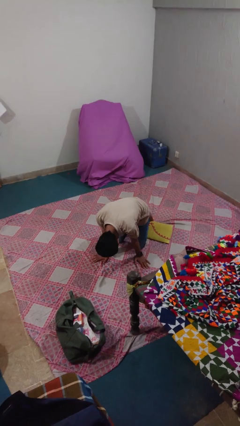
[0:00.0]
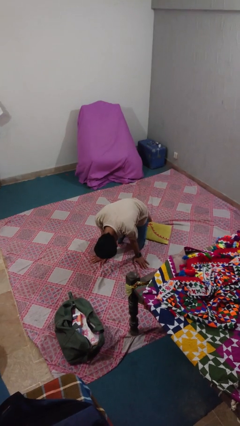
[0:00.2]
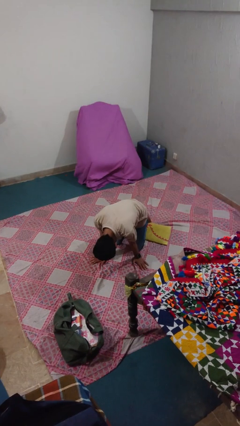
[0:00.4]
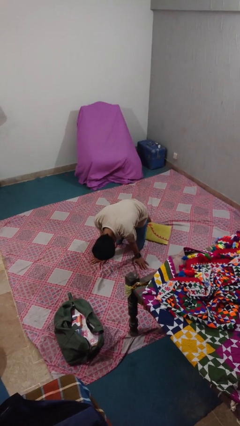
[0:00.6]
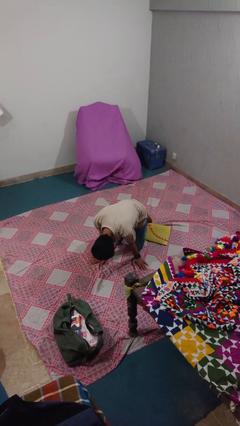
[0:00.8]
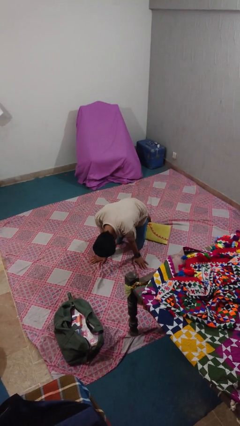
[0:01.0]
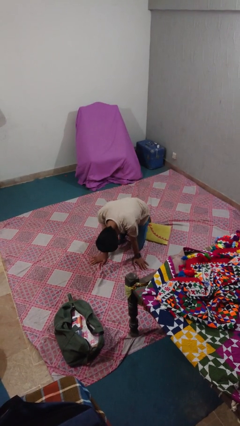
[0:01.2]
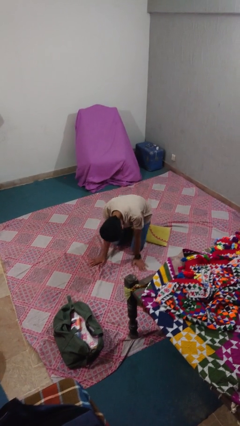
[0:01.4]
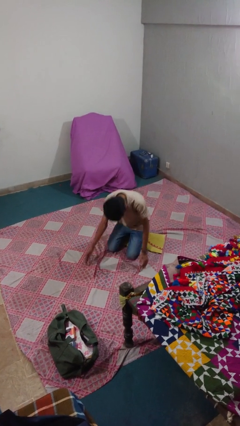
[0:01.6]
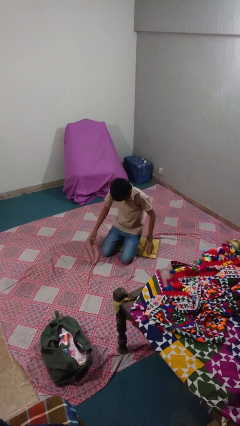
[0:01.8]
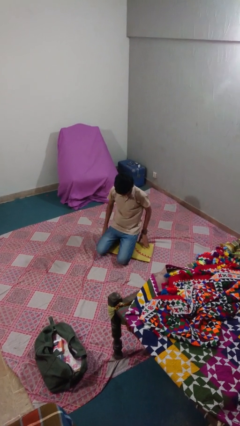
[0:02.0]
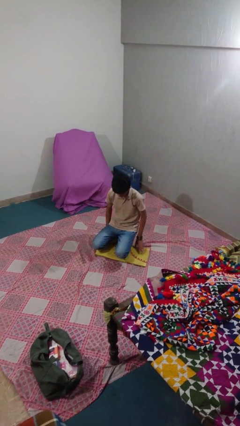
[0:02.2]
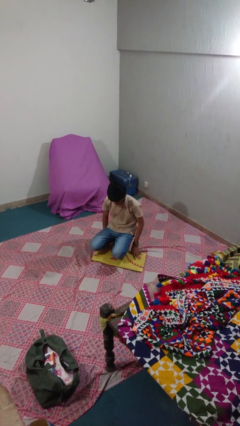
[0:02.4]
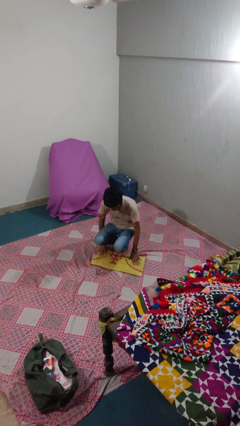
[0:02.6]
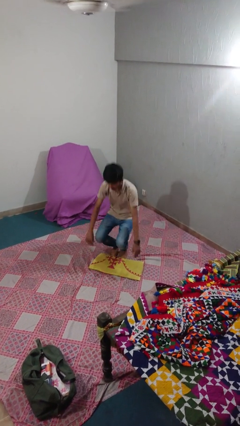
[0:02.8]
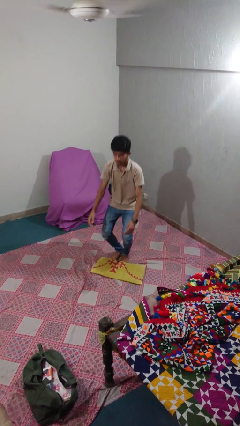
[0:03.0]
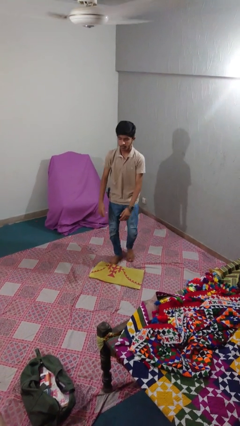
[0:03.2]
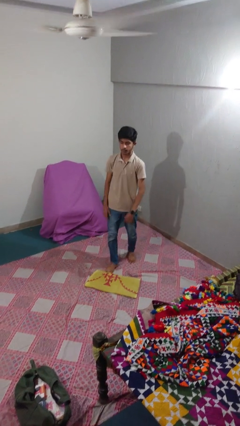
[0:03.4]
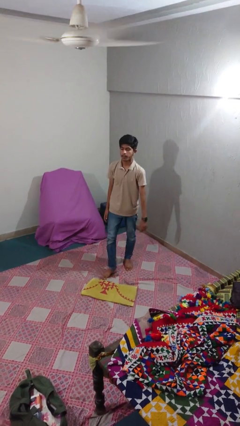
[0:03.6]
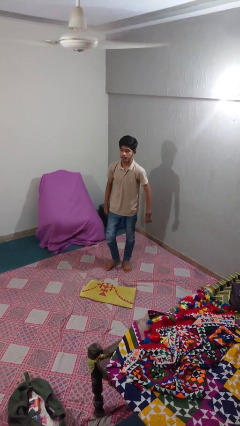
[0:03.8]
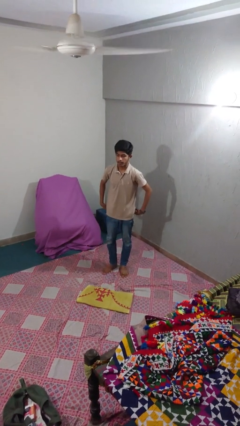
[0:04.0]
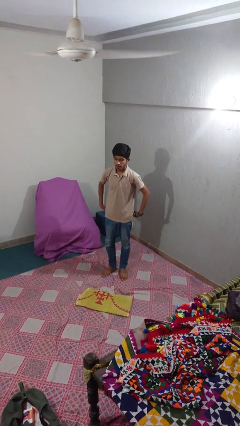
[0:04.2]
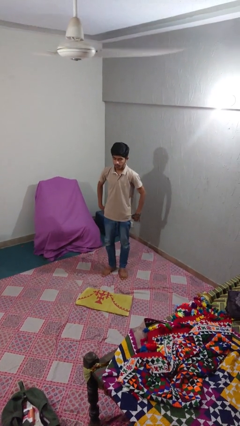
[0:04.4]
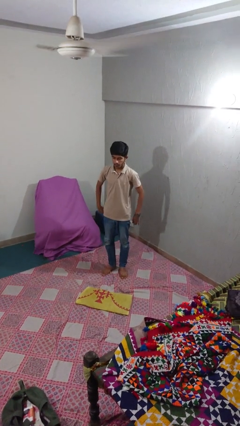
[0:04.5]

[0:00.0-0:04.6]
person stands up from floor

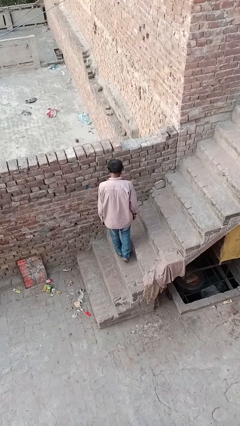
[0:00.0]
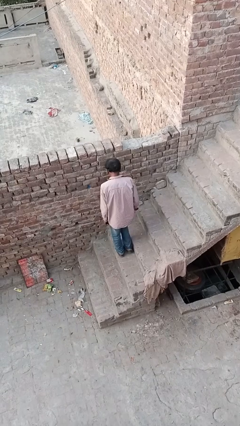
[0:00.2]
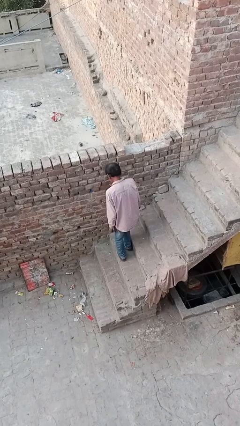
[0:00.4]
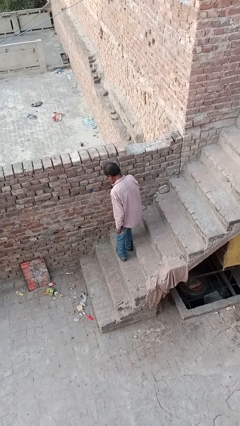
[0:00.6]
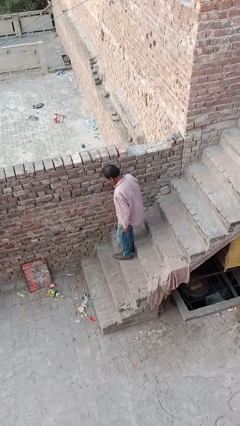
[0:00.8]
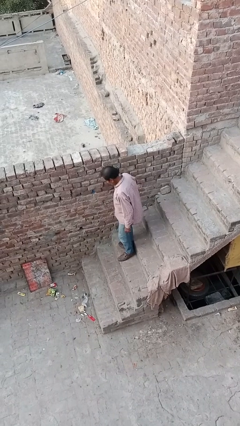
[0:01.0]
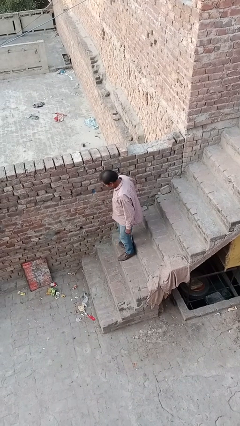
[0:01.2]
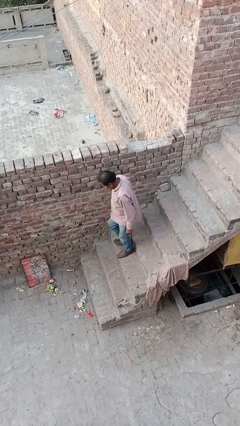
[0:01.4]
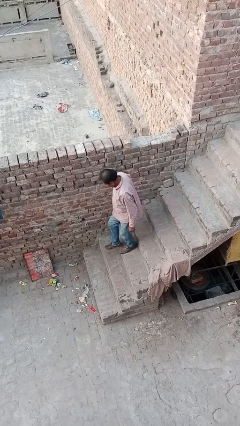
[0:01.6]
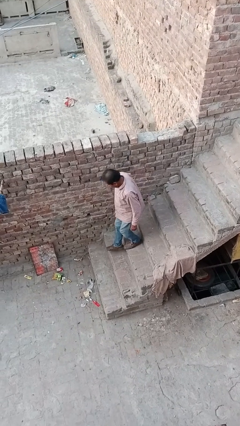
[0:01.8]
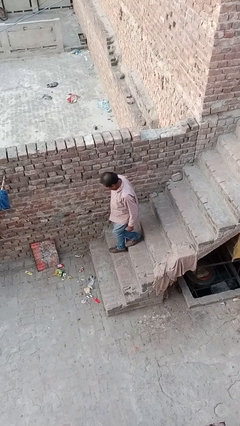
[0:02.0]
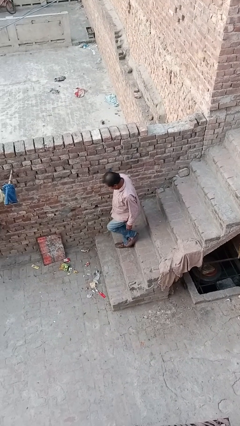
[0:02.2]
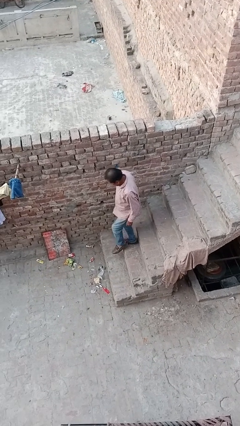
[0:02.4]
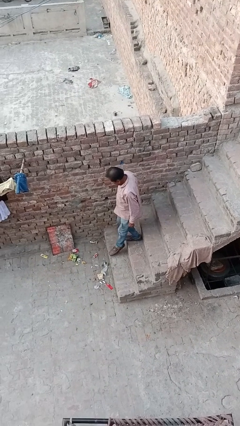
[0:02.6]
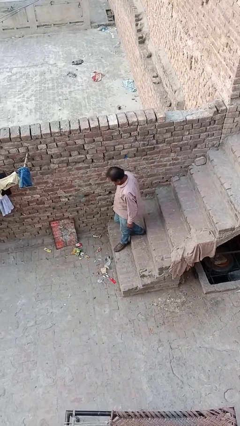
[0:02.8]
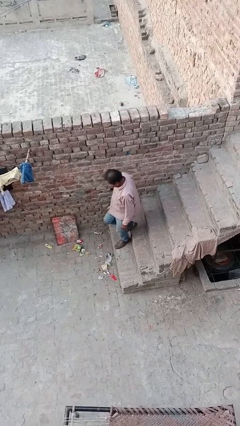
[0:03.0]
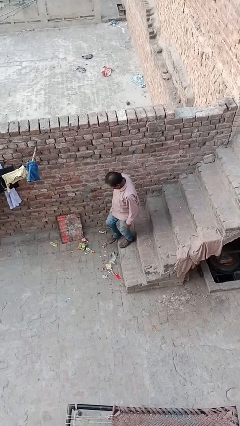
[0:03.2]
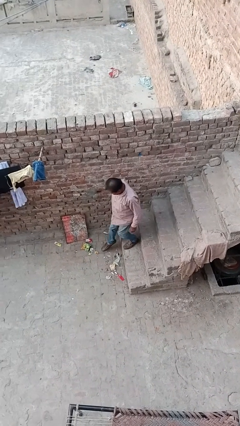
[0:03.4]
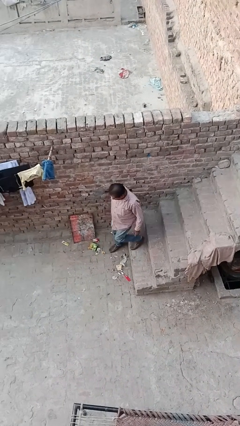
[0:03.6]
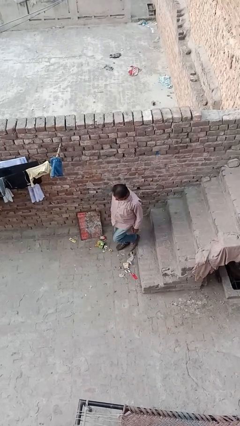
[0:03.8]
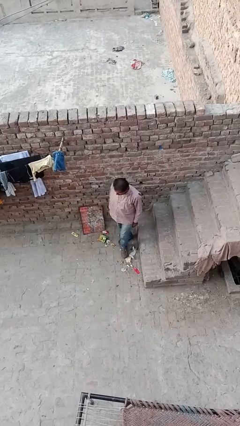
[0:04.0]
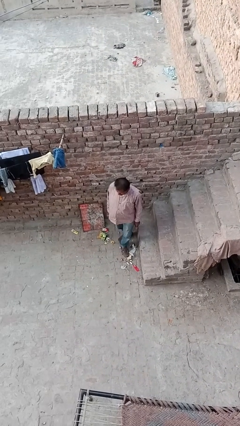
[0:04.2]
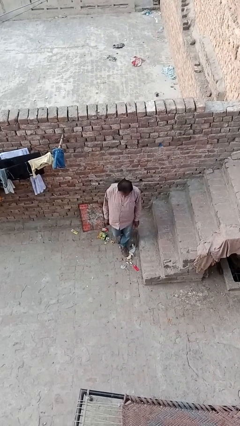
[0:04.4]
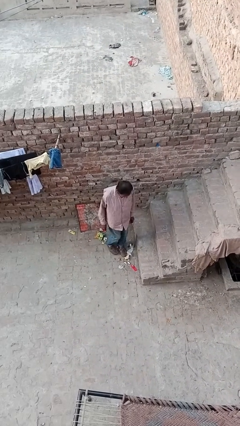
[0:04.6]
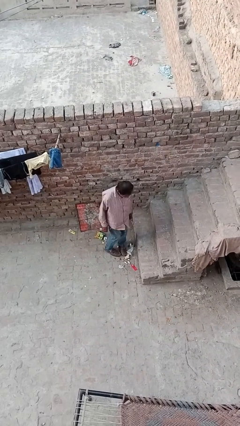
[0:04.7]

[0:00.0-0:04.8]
person climbs down stairs

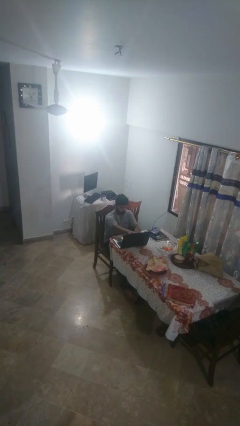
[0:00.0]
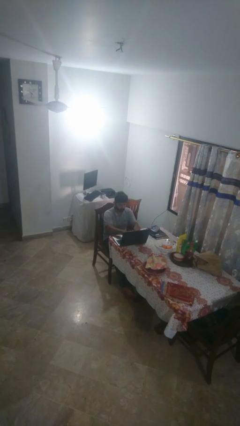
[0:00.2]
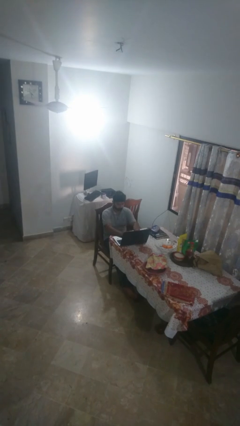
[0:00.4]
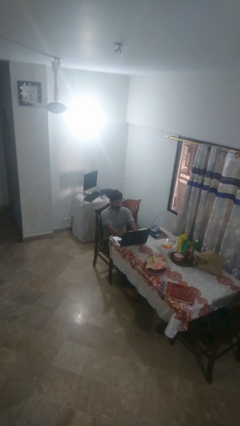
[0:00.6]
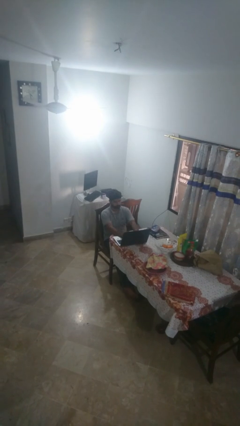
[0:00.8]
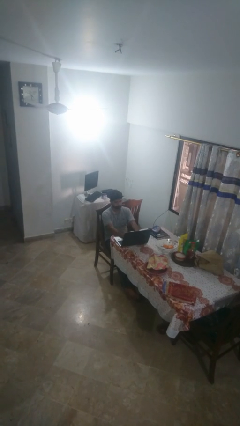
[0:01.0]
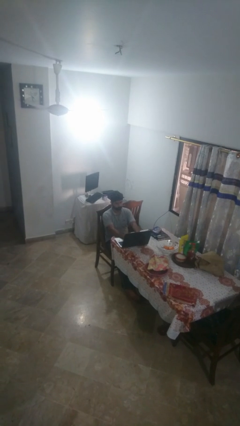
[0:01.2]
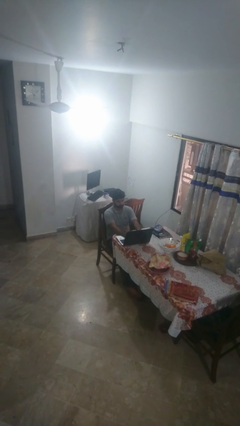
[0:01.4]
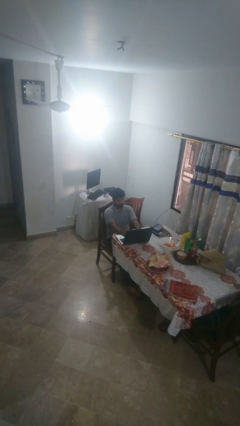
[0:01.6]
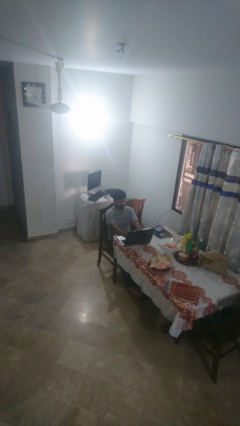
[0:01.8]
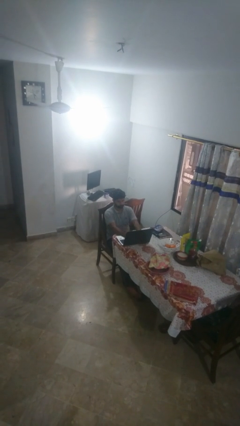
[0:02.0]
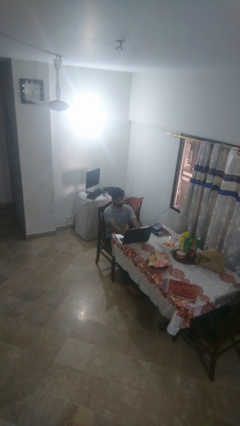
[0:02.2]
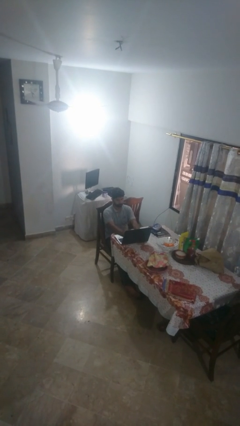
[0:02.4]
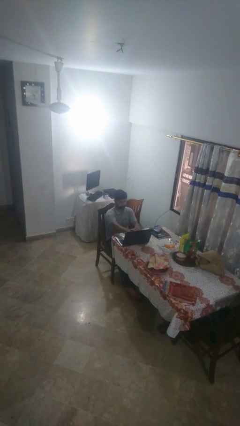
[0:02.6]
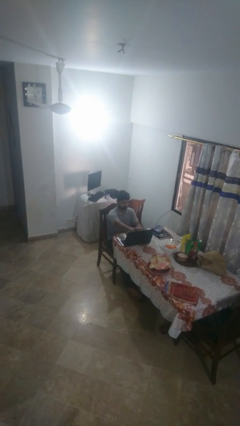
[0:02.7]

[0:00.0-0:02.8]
person interacts with laptop

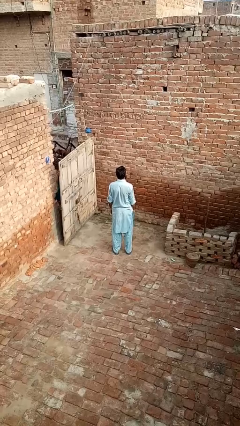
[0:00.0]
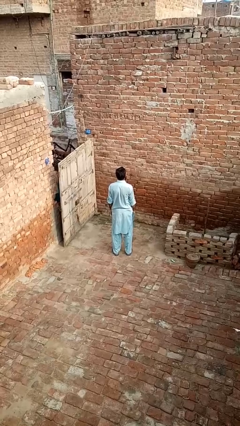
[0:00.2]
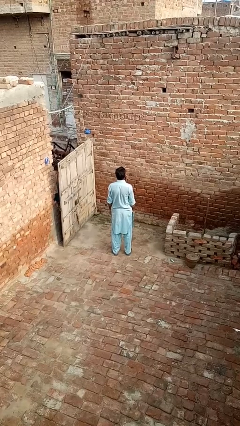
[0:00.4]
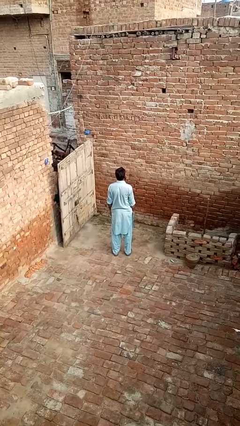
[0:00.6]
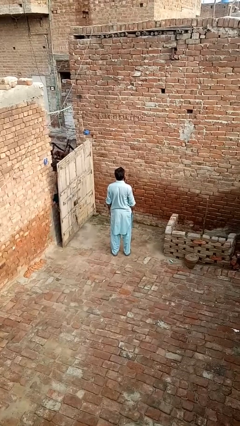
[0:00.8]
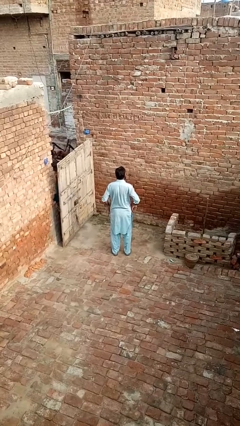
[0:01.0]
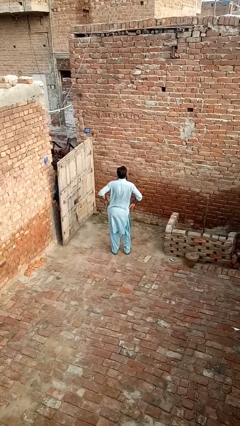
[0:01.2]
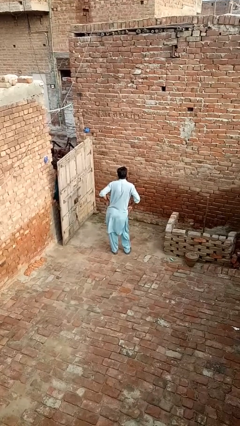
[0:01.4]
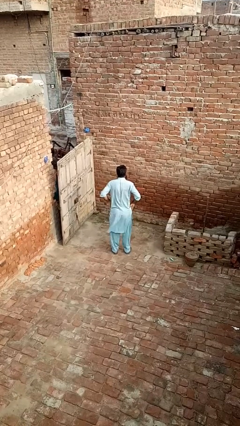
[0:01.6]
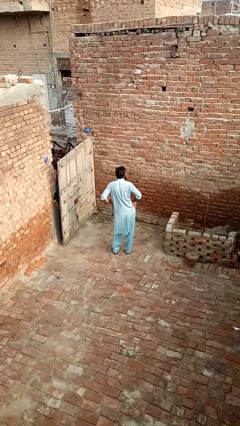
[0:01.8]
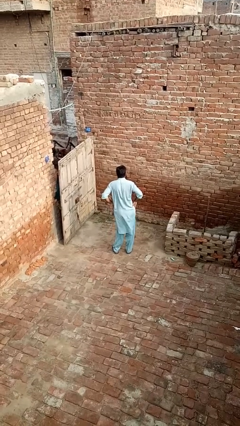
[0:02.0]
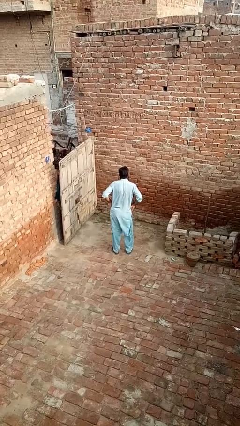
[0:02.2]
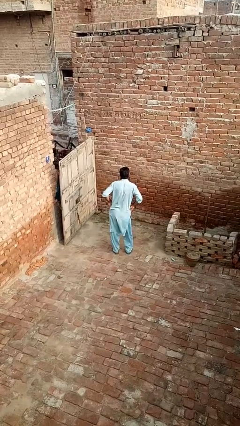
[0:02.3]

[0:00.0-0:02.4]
person wiggles hips

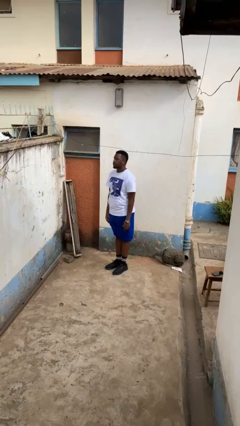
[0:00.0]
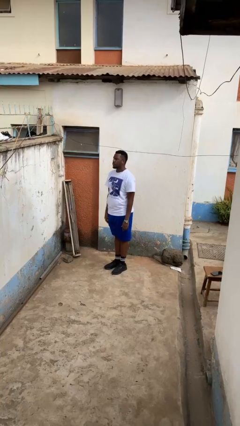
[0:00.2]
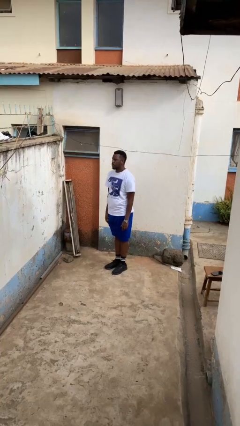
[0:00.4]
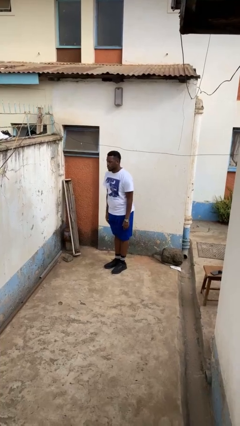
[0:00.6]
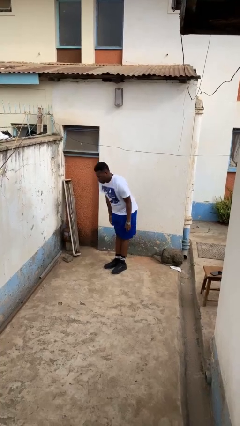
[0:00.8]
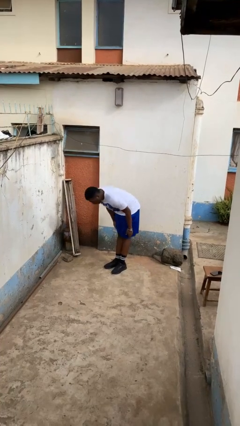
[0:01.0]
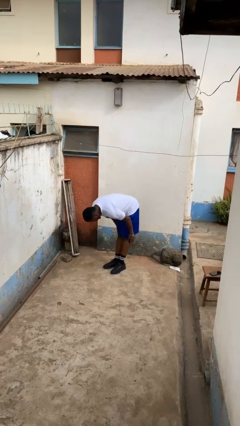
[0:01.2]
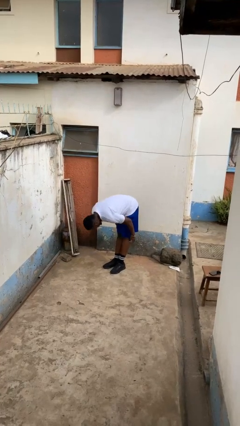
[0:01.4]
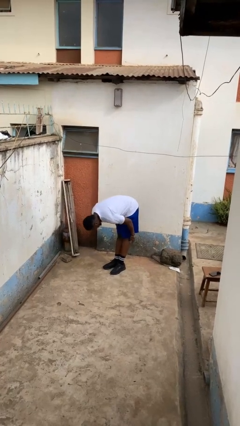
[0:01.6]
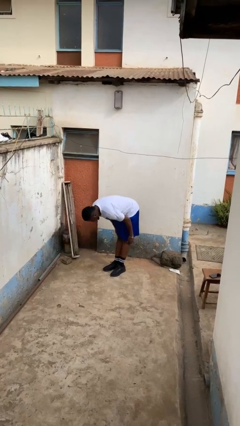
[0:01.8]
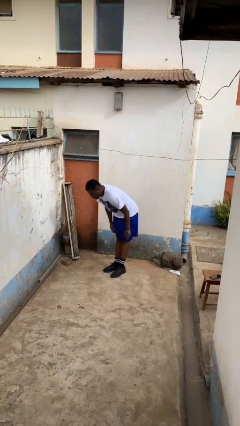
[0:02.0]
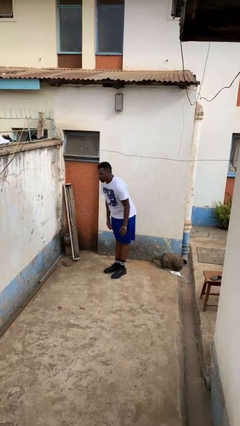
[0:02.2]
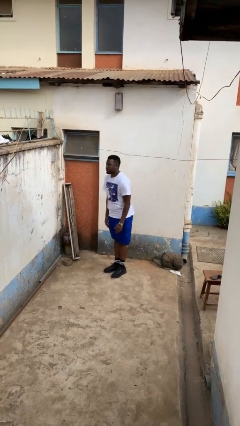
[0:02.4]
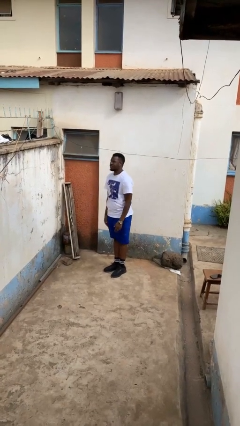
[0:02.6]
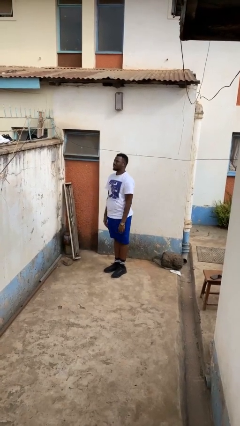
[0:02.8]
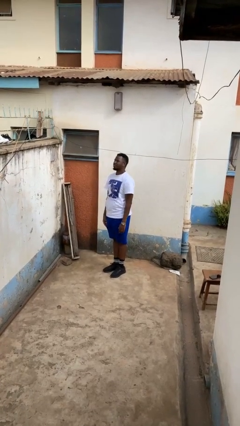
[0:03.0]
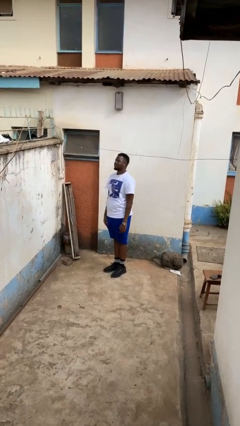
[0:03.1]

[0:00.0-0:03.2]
person bows
